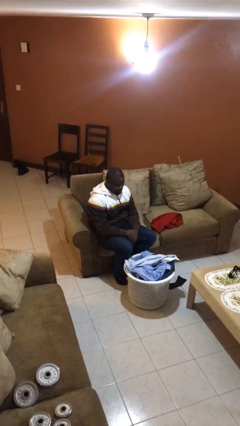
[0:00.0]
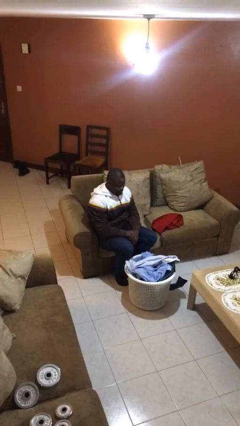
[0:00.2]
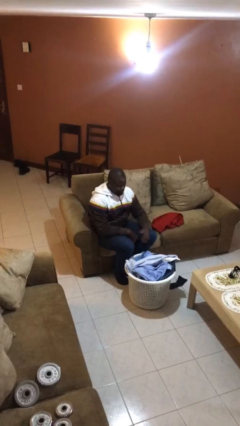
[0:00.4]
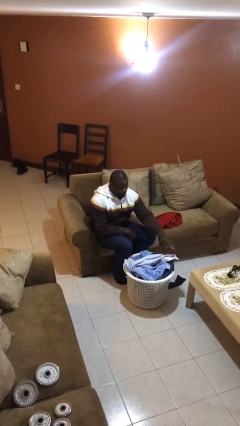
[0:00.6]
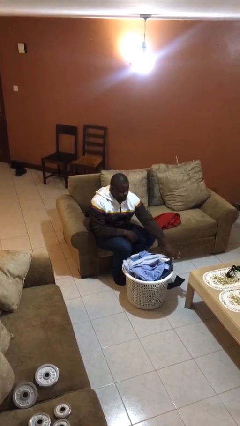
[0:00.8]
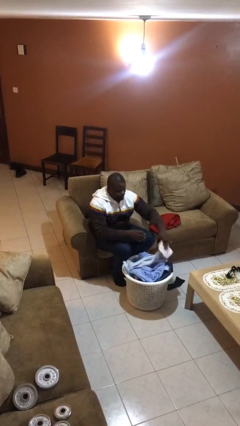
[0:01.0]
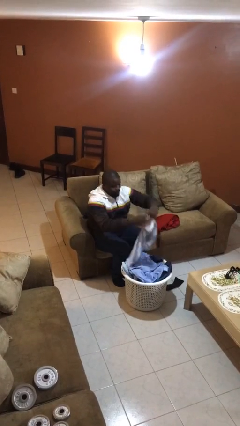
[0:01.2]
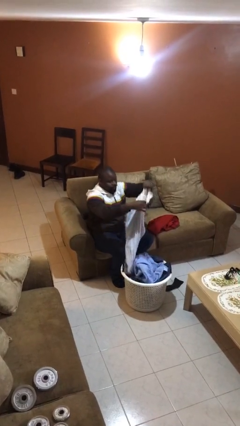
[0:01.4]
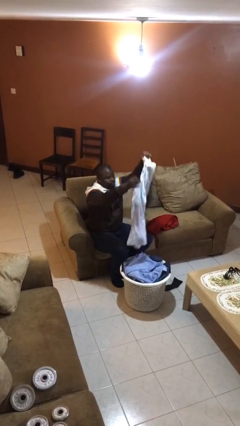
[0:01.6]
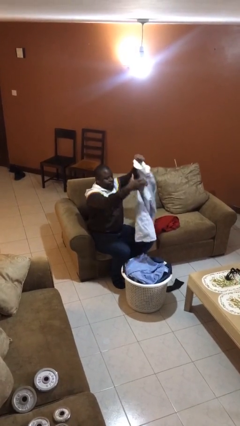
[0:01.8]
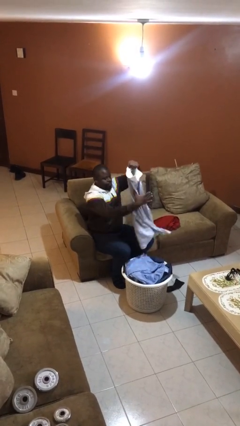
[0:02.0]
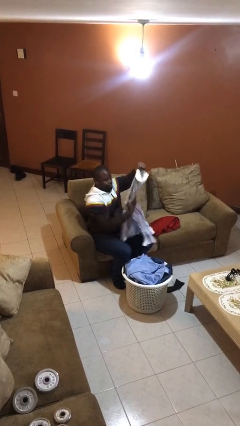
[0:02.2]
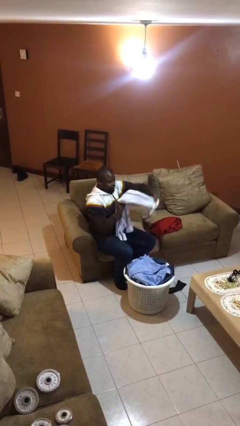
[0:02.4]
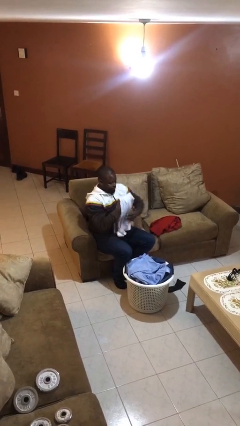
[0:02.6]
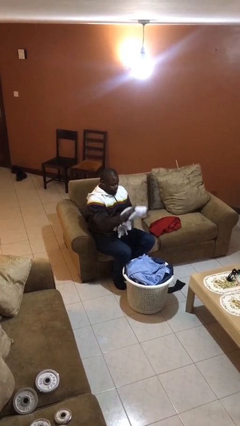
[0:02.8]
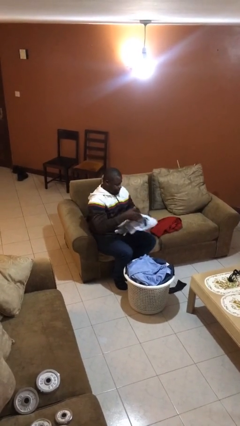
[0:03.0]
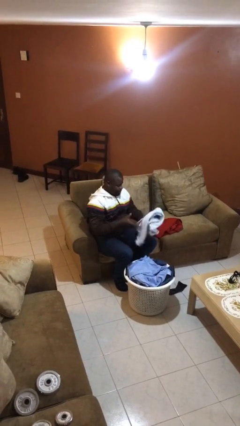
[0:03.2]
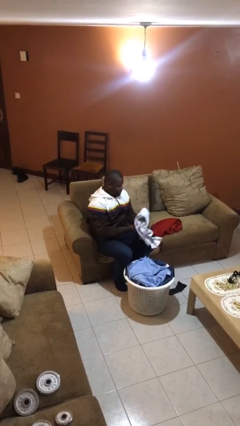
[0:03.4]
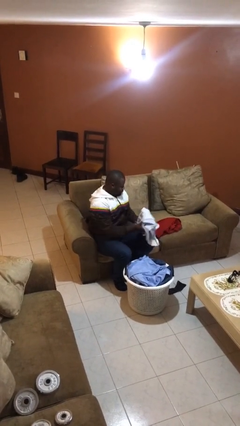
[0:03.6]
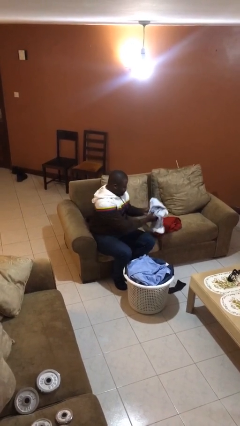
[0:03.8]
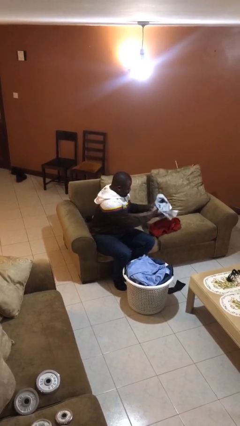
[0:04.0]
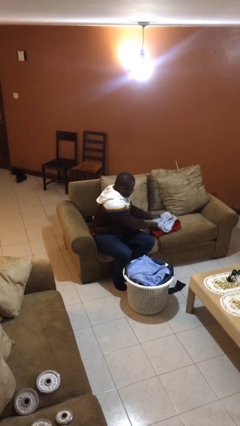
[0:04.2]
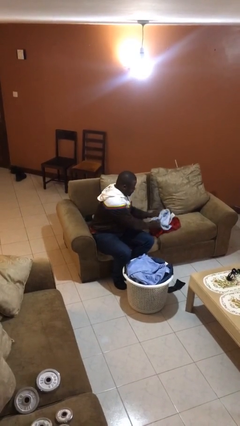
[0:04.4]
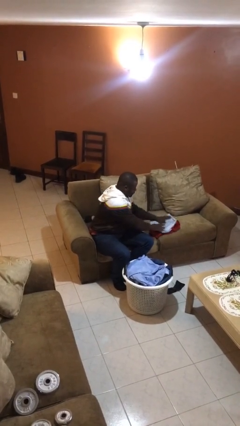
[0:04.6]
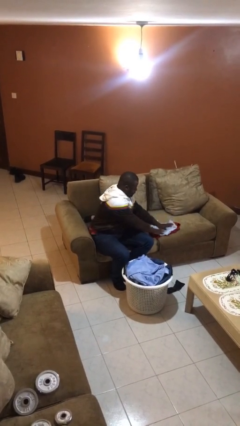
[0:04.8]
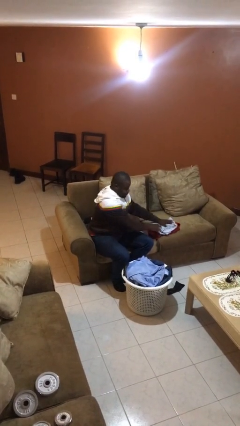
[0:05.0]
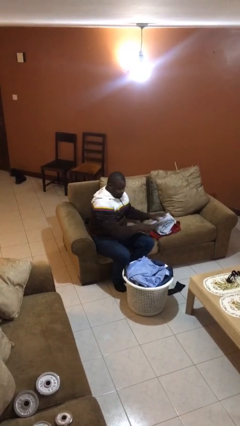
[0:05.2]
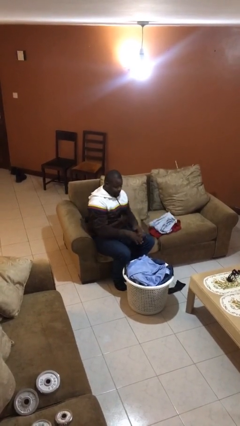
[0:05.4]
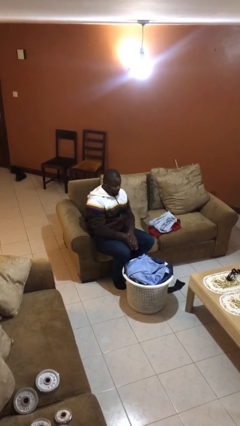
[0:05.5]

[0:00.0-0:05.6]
person folds shirt

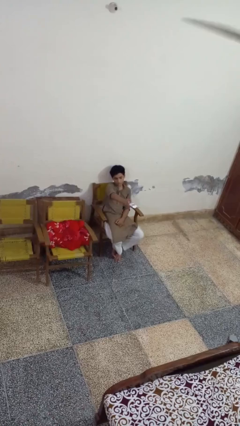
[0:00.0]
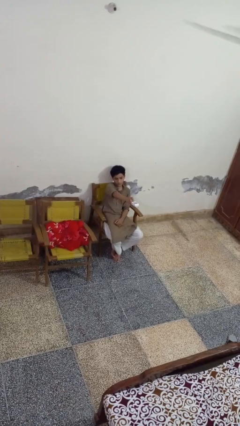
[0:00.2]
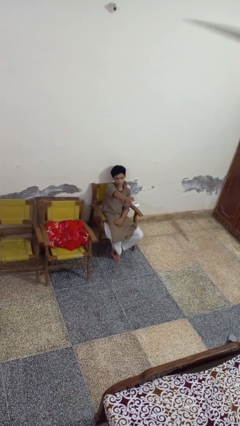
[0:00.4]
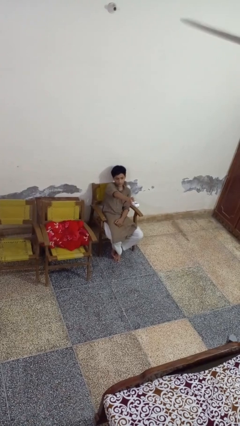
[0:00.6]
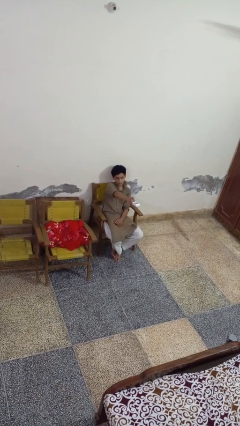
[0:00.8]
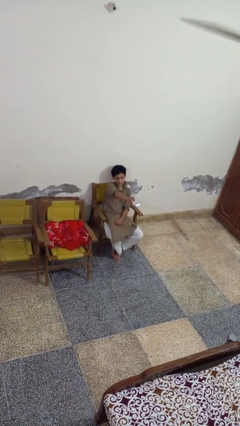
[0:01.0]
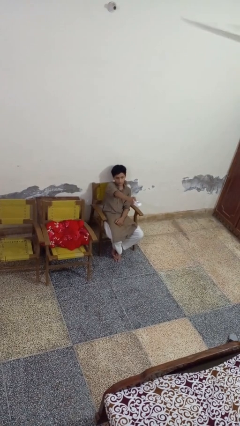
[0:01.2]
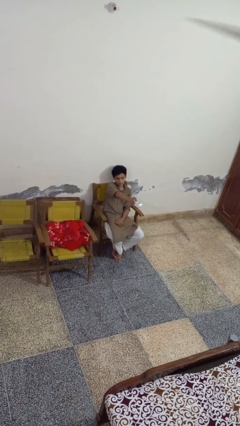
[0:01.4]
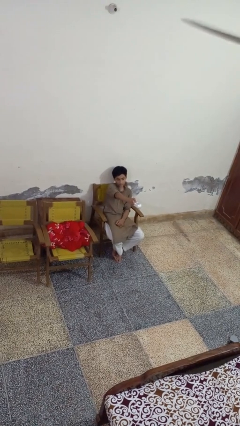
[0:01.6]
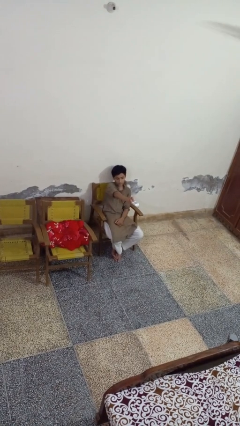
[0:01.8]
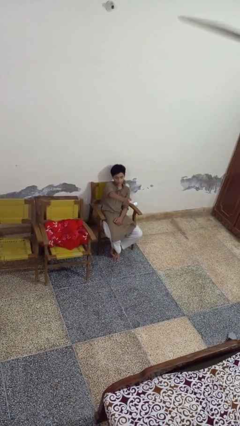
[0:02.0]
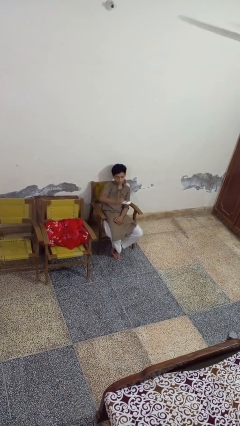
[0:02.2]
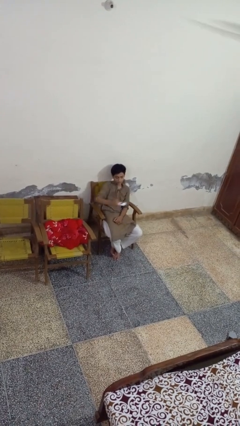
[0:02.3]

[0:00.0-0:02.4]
person uses television remote

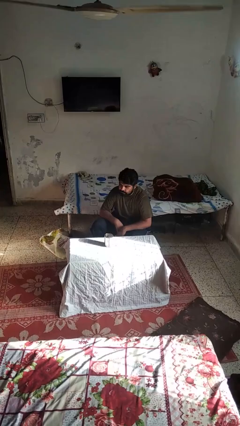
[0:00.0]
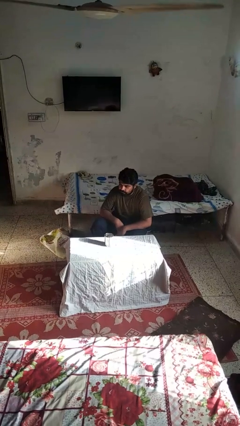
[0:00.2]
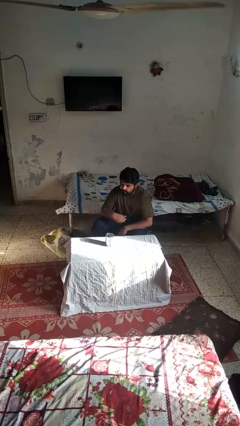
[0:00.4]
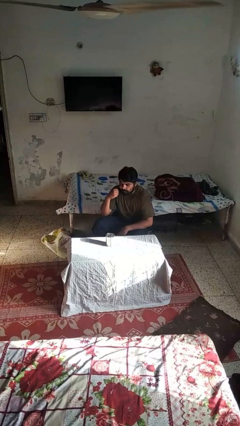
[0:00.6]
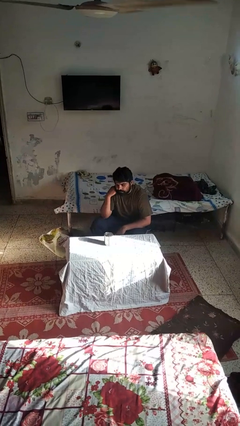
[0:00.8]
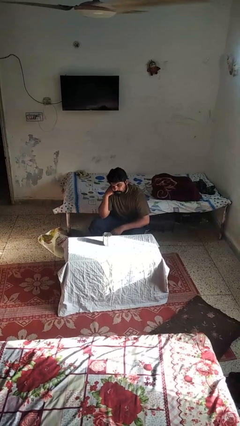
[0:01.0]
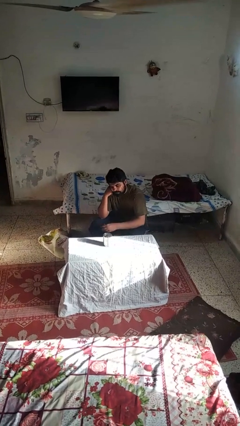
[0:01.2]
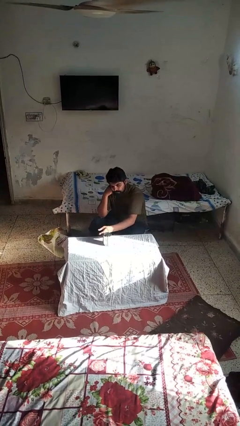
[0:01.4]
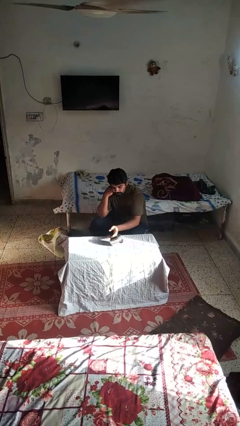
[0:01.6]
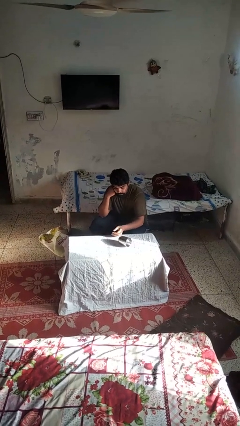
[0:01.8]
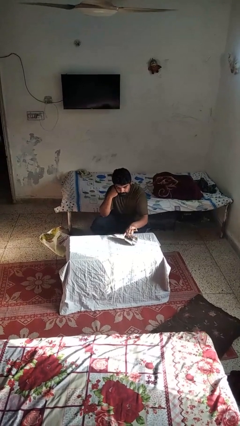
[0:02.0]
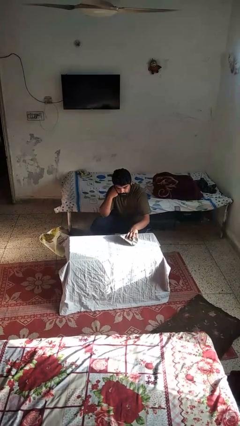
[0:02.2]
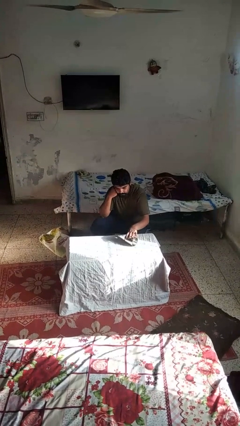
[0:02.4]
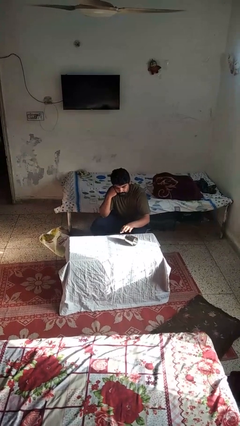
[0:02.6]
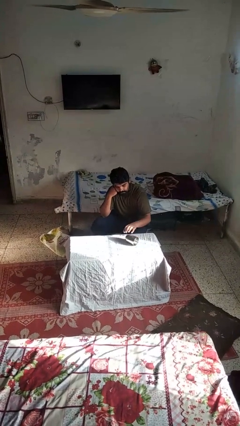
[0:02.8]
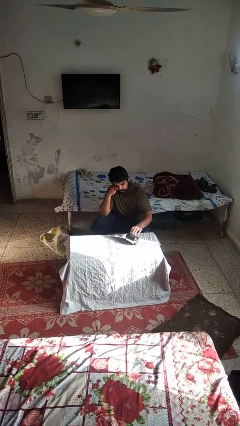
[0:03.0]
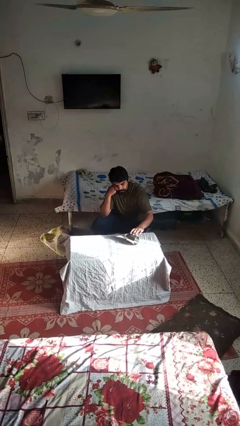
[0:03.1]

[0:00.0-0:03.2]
person knocks over glass

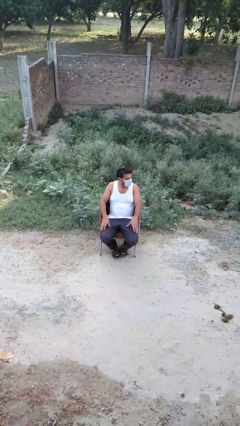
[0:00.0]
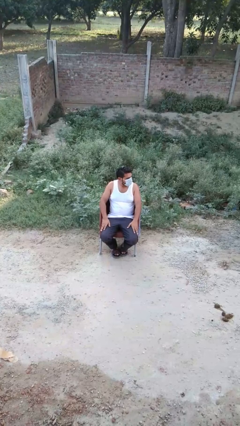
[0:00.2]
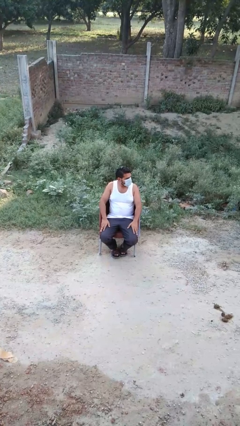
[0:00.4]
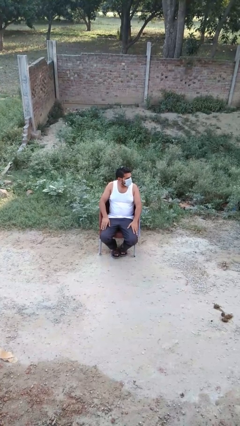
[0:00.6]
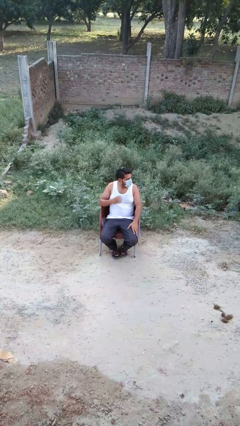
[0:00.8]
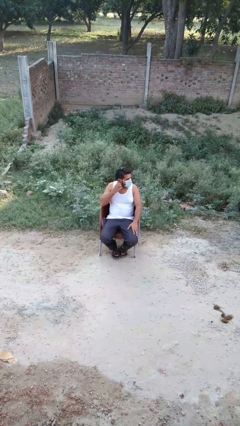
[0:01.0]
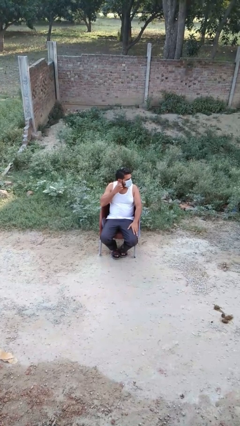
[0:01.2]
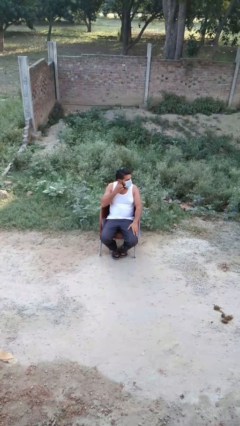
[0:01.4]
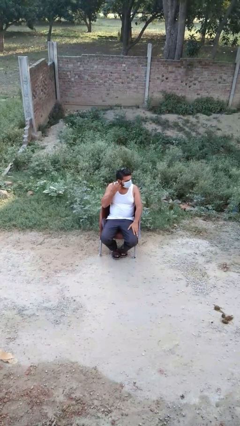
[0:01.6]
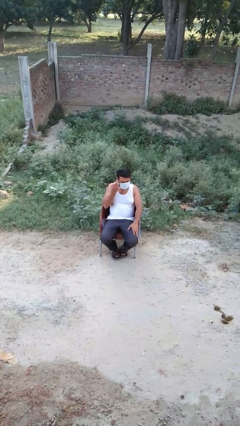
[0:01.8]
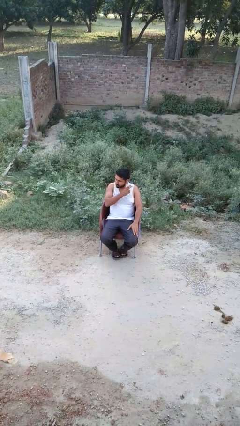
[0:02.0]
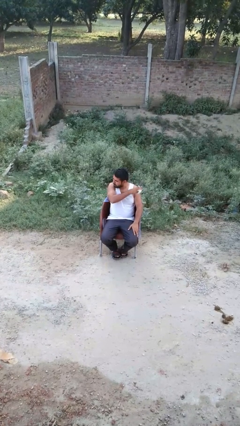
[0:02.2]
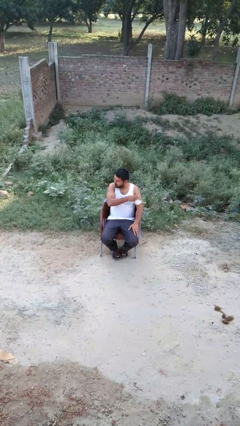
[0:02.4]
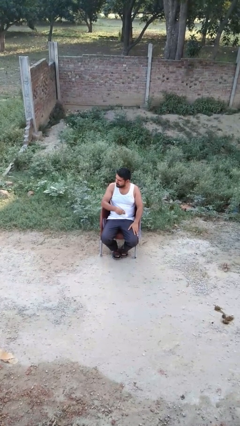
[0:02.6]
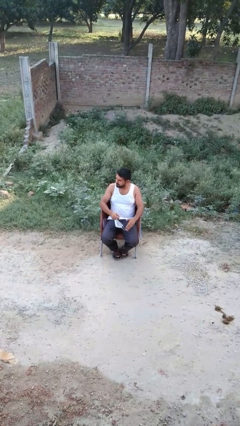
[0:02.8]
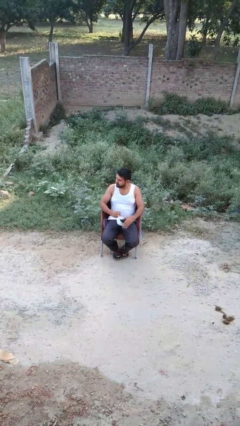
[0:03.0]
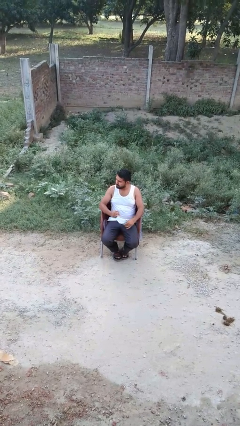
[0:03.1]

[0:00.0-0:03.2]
person takes off facemask

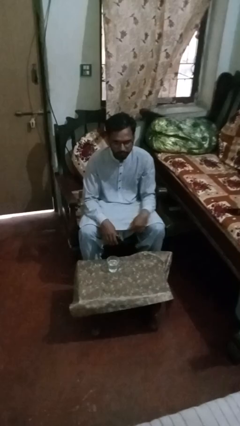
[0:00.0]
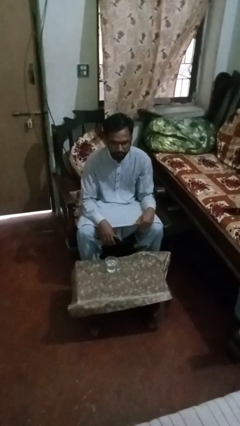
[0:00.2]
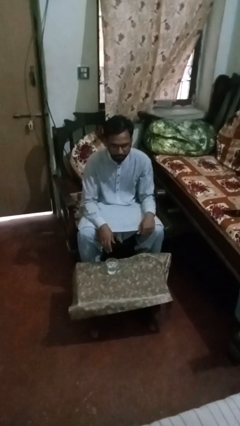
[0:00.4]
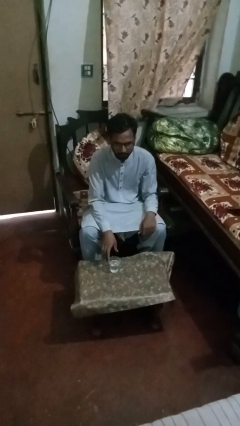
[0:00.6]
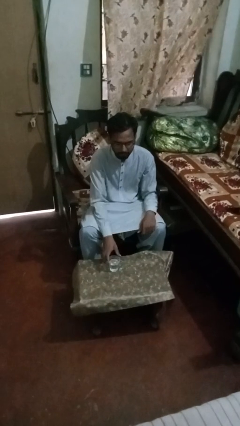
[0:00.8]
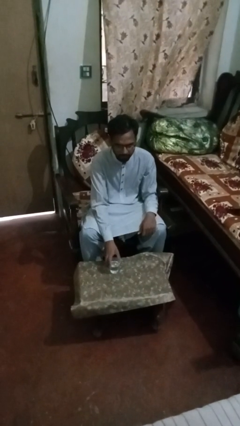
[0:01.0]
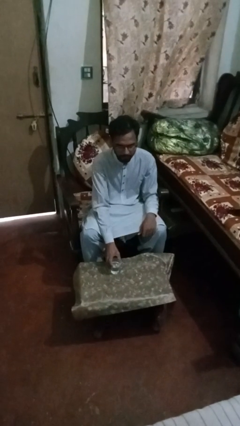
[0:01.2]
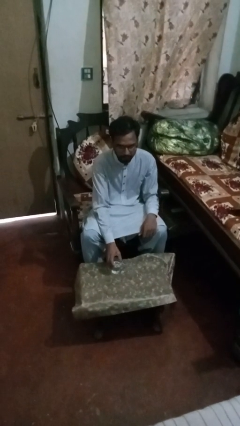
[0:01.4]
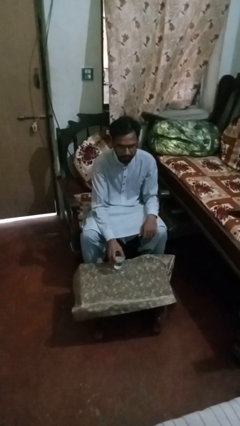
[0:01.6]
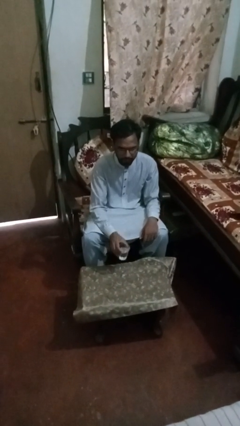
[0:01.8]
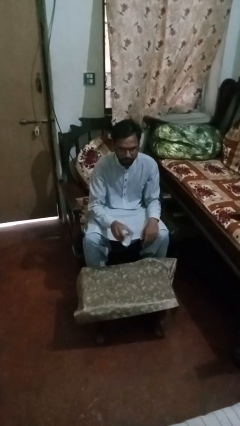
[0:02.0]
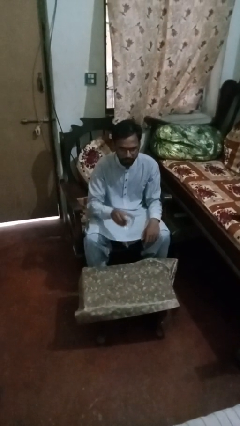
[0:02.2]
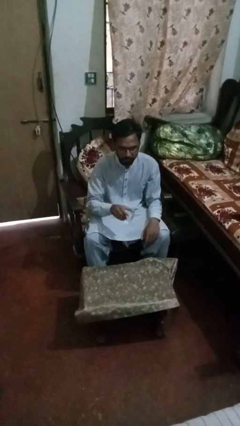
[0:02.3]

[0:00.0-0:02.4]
person picks up object from table

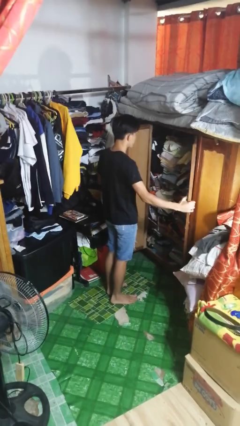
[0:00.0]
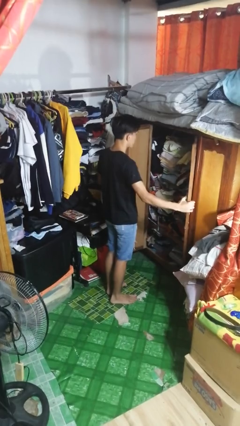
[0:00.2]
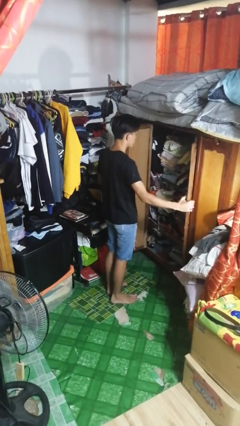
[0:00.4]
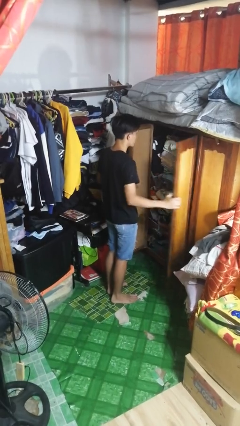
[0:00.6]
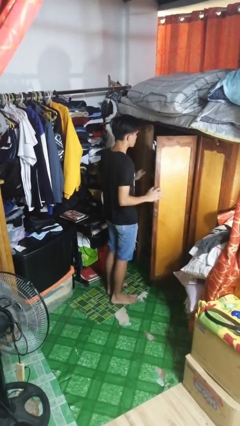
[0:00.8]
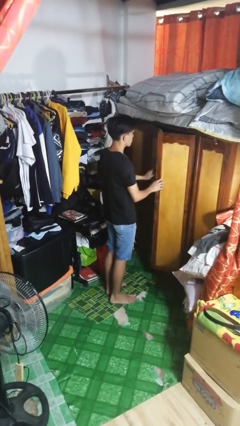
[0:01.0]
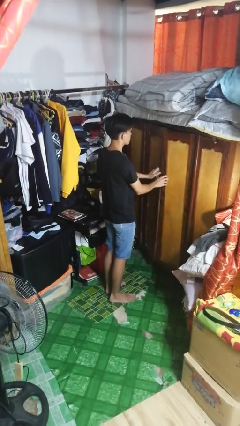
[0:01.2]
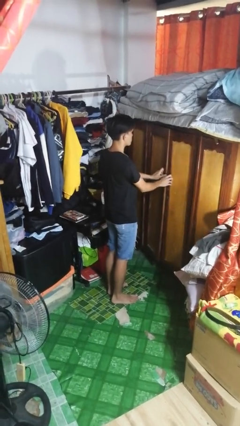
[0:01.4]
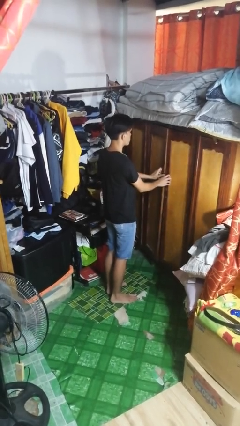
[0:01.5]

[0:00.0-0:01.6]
person closes closet door
